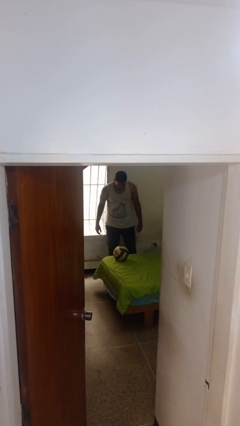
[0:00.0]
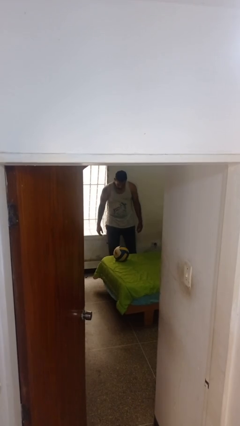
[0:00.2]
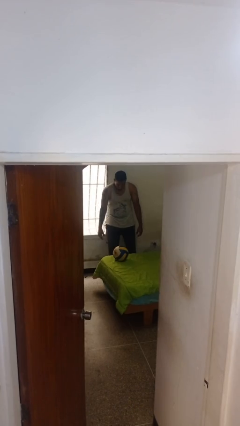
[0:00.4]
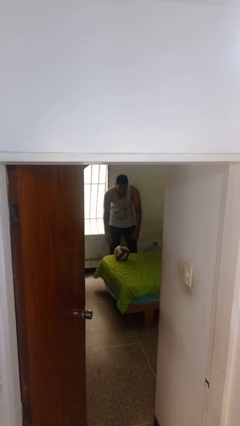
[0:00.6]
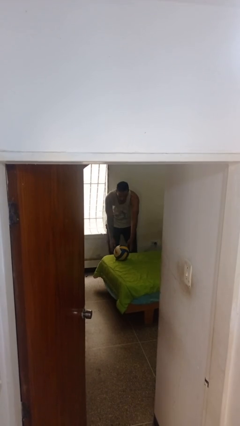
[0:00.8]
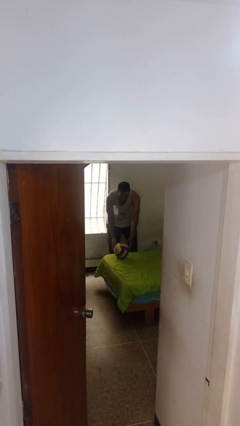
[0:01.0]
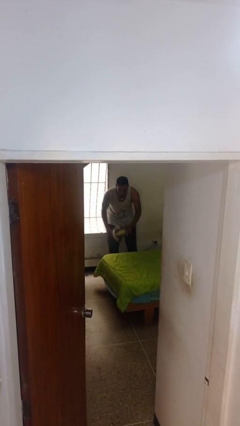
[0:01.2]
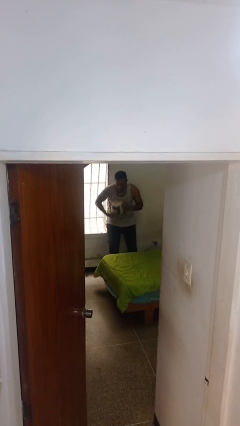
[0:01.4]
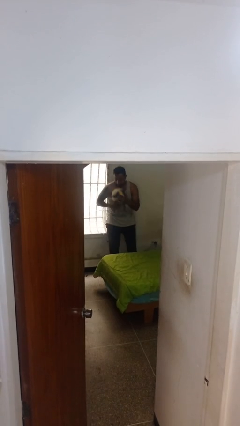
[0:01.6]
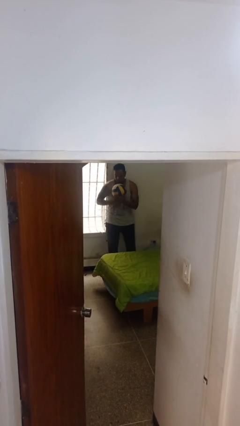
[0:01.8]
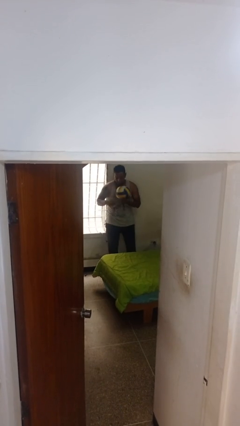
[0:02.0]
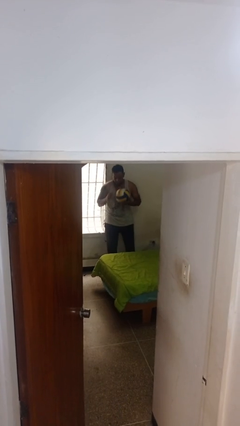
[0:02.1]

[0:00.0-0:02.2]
person picks up object from bed

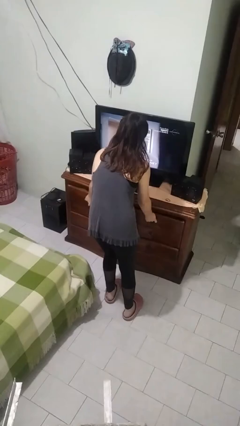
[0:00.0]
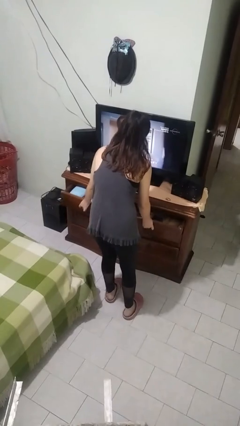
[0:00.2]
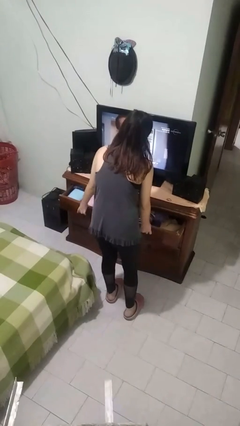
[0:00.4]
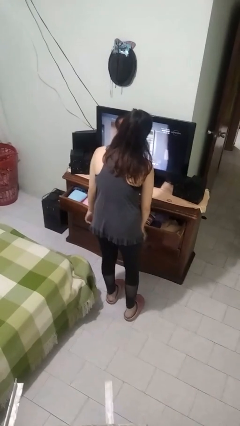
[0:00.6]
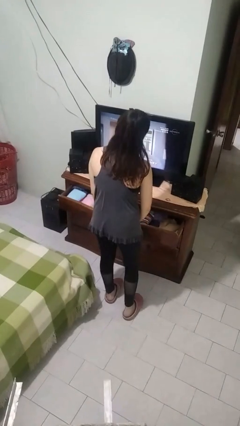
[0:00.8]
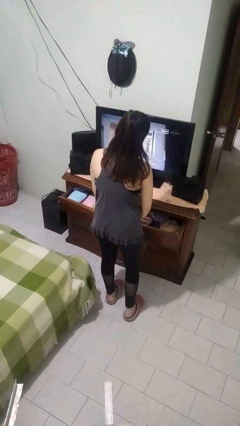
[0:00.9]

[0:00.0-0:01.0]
person opens dresser drawer

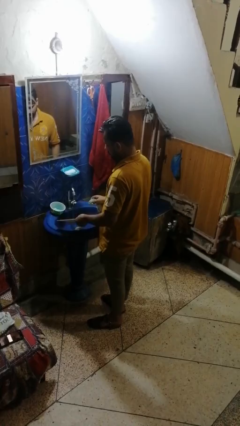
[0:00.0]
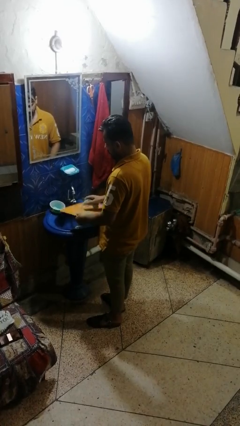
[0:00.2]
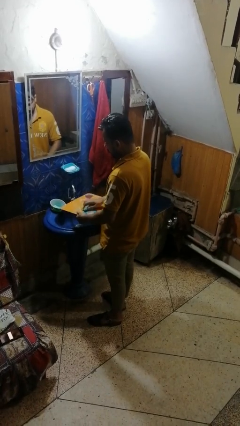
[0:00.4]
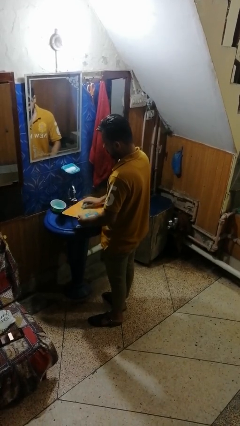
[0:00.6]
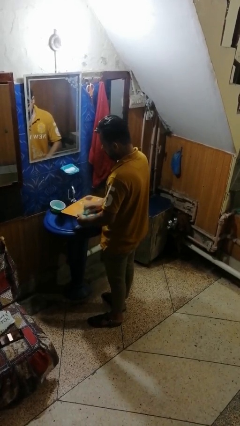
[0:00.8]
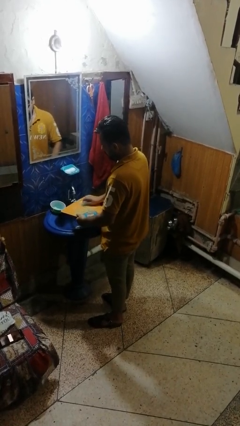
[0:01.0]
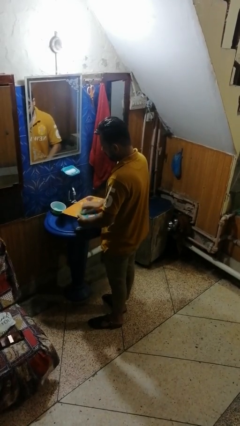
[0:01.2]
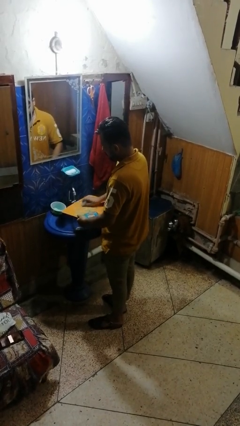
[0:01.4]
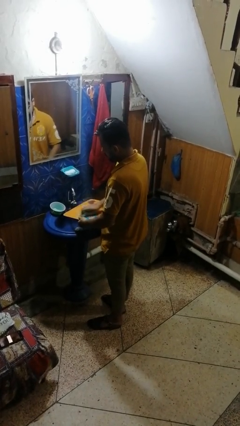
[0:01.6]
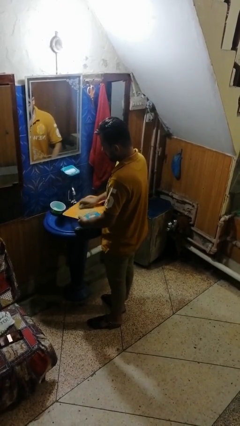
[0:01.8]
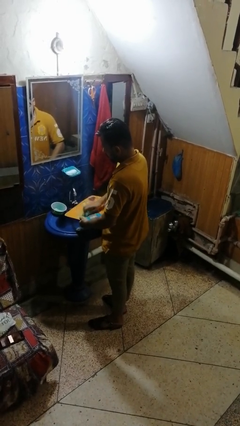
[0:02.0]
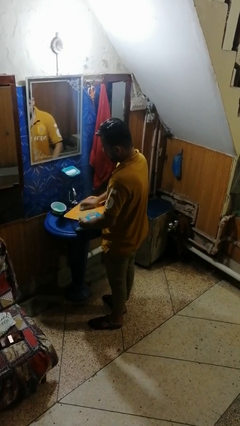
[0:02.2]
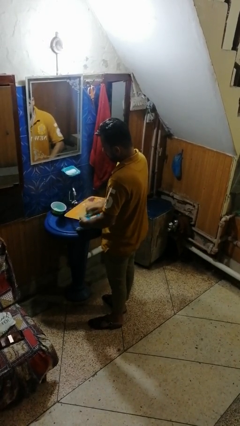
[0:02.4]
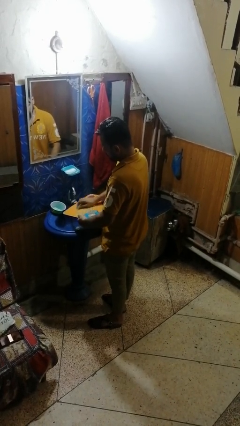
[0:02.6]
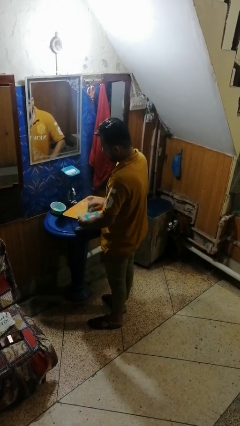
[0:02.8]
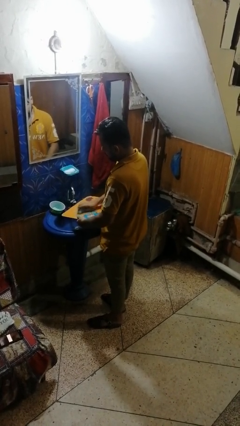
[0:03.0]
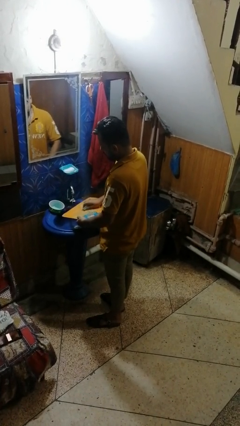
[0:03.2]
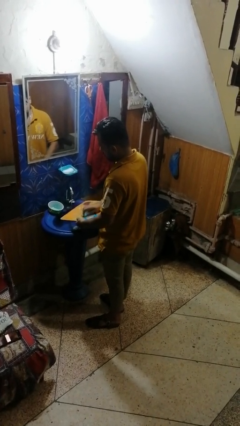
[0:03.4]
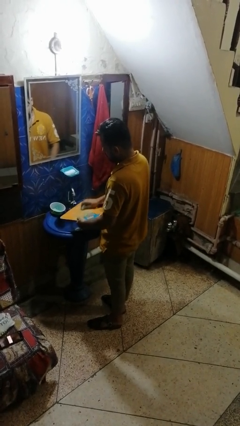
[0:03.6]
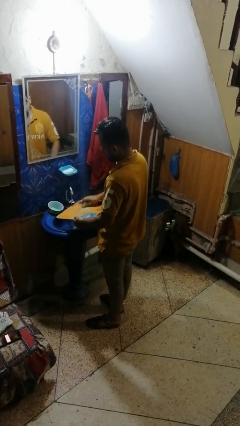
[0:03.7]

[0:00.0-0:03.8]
person washes dish

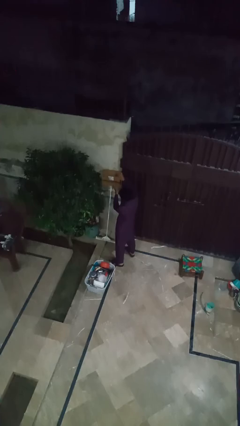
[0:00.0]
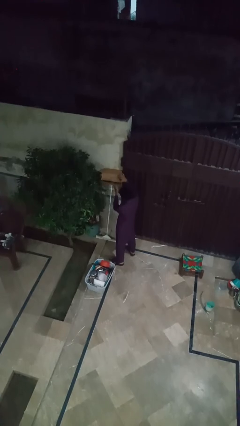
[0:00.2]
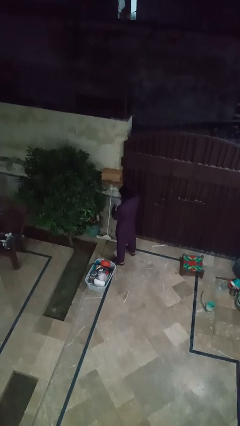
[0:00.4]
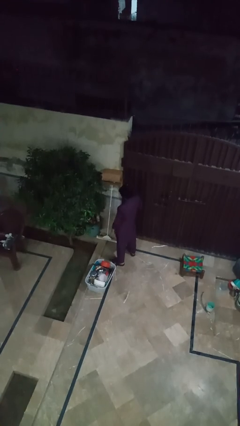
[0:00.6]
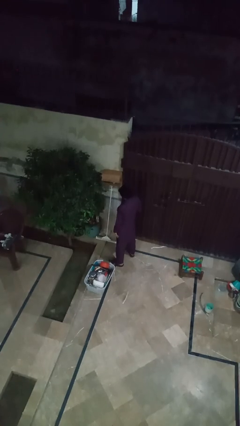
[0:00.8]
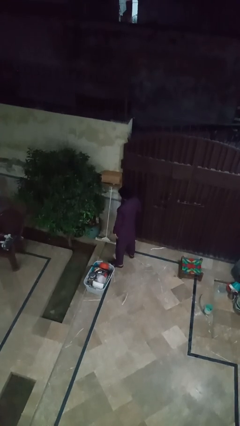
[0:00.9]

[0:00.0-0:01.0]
person closes mailbox

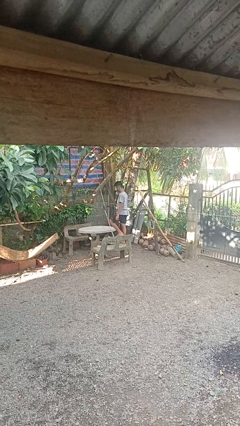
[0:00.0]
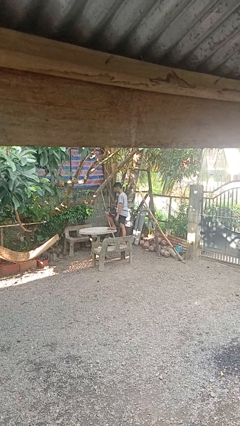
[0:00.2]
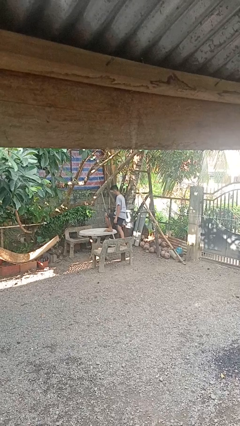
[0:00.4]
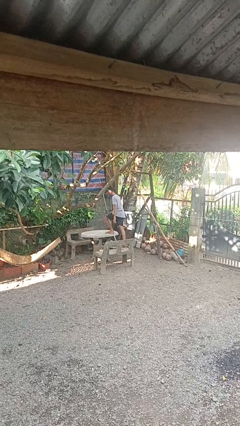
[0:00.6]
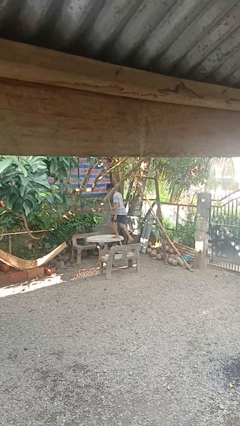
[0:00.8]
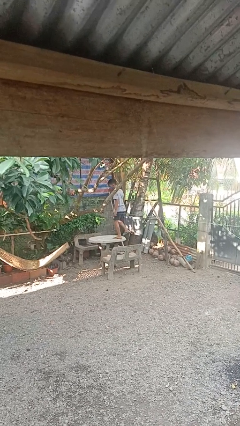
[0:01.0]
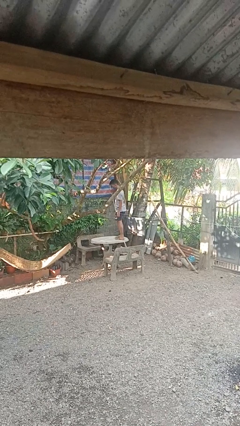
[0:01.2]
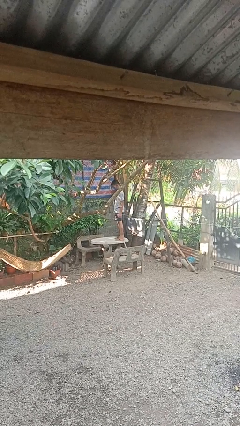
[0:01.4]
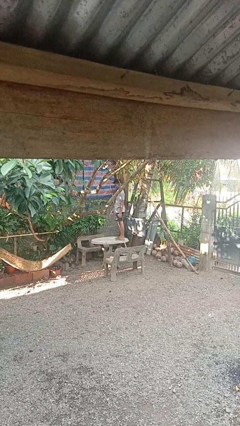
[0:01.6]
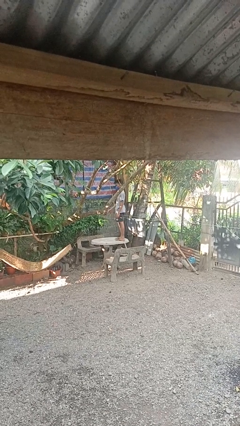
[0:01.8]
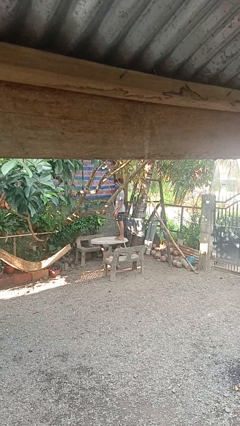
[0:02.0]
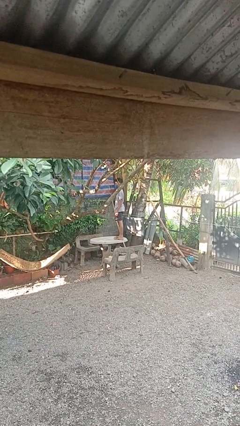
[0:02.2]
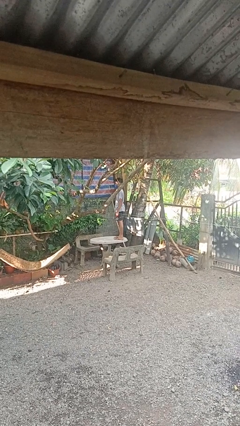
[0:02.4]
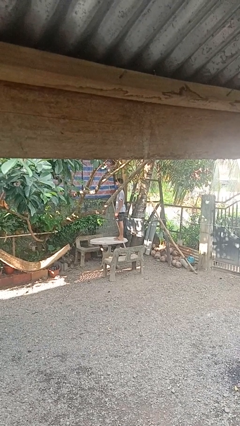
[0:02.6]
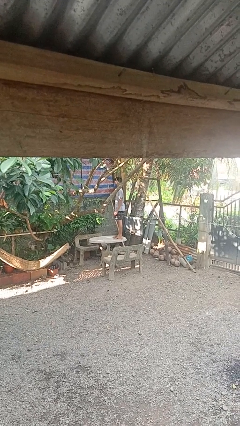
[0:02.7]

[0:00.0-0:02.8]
person climbs on table

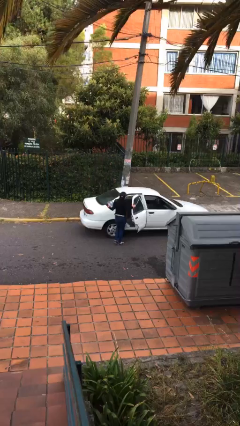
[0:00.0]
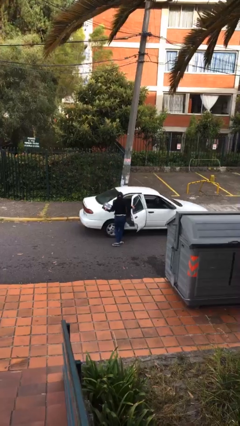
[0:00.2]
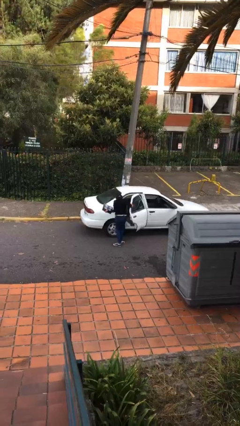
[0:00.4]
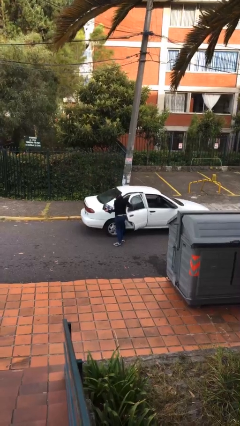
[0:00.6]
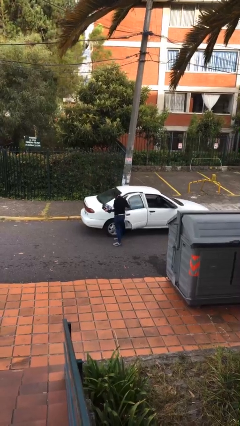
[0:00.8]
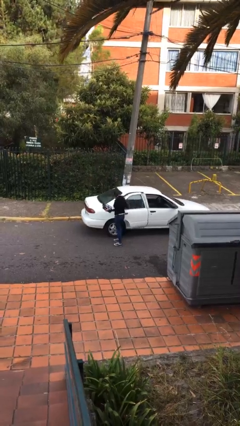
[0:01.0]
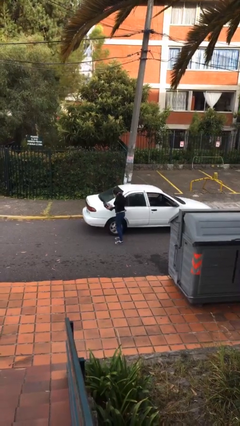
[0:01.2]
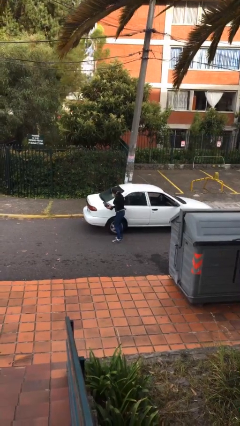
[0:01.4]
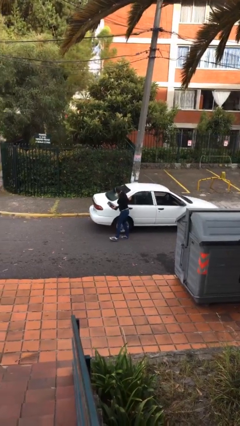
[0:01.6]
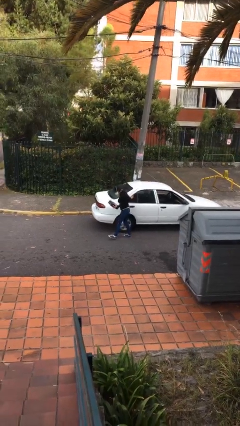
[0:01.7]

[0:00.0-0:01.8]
person closes car door

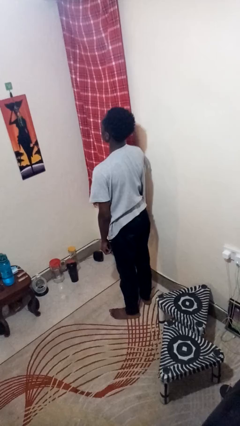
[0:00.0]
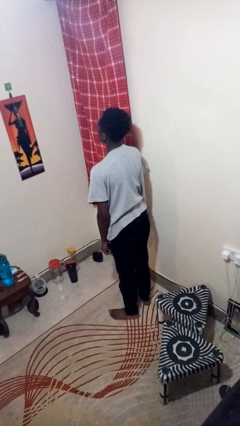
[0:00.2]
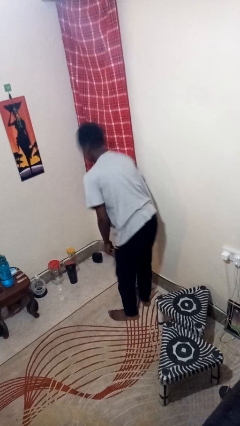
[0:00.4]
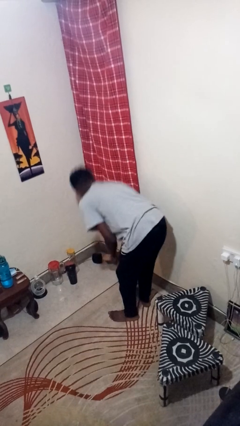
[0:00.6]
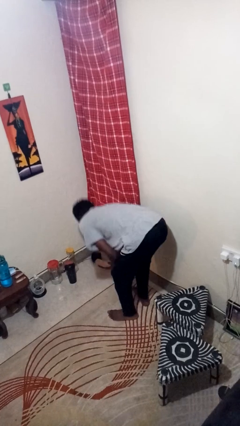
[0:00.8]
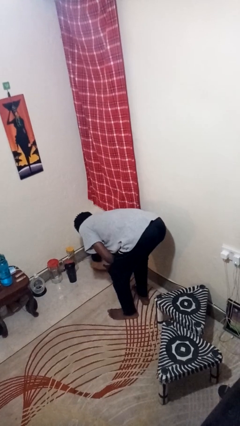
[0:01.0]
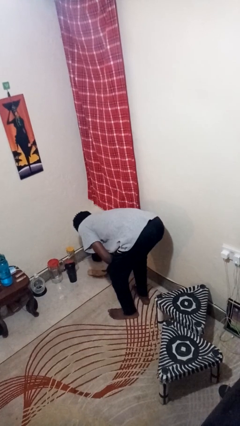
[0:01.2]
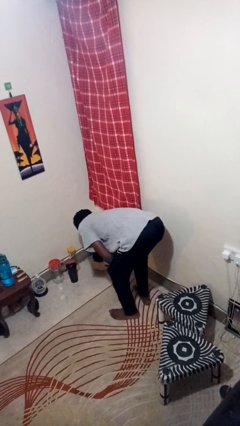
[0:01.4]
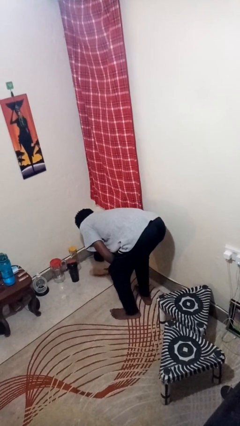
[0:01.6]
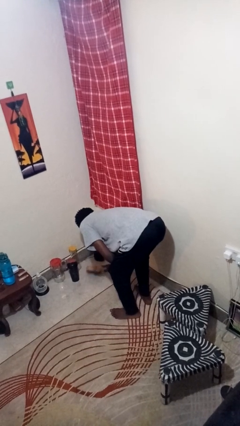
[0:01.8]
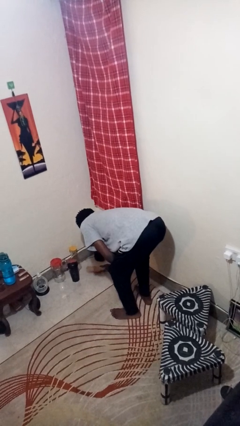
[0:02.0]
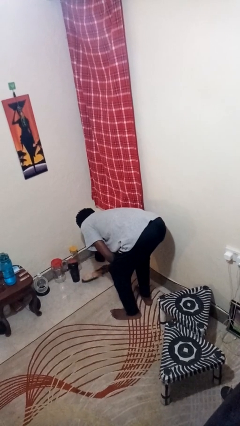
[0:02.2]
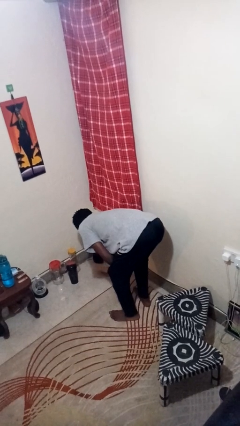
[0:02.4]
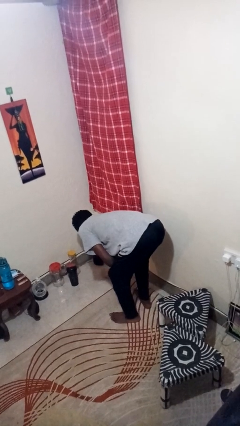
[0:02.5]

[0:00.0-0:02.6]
person sweeps floor

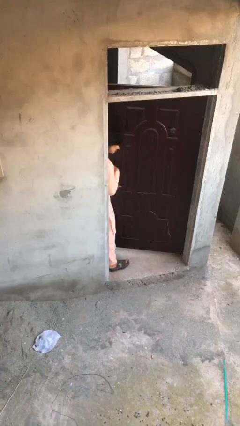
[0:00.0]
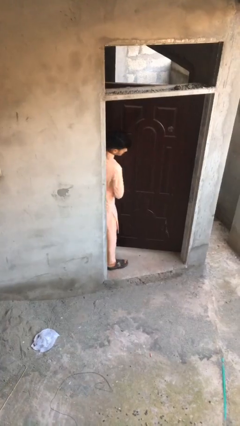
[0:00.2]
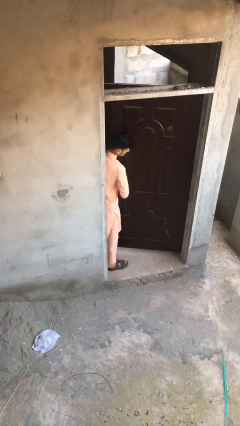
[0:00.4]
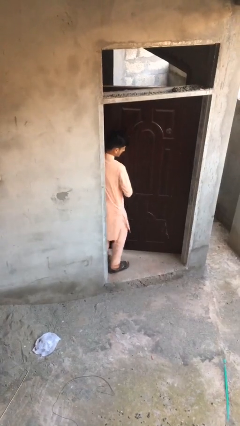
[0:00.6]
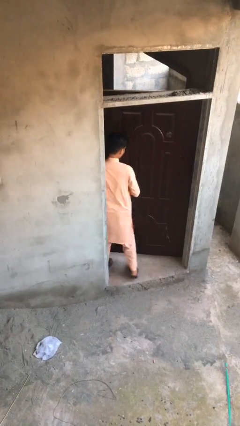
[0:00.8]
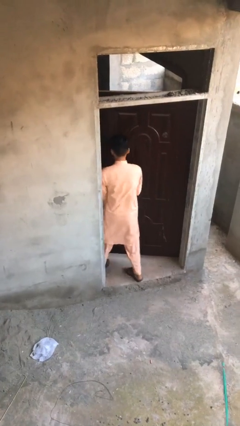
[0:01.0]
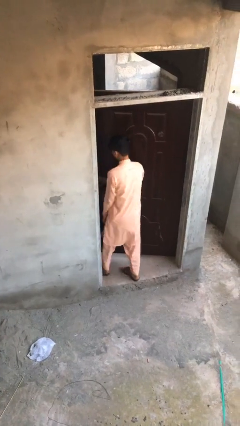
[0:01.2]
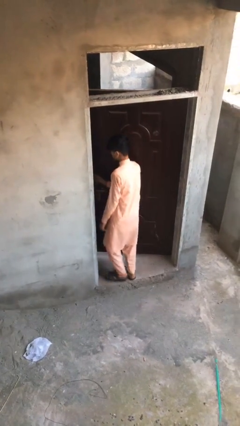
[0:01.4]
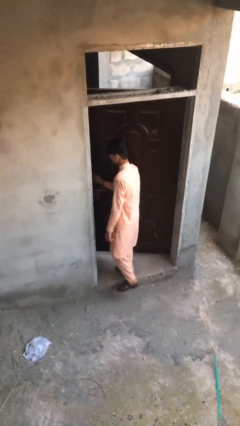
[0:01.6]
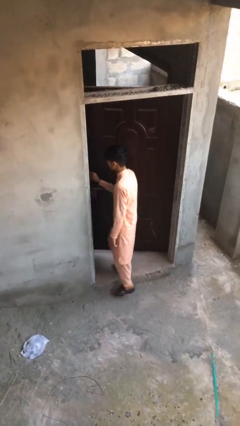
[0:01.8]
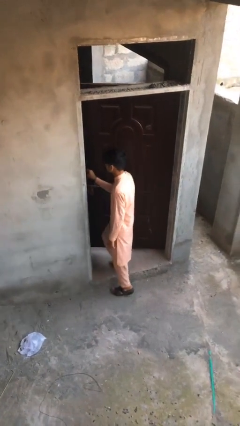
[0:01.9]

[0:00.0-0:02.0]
person enters scene through structure
